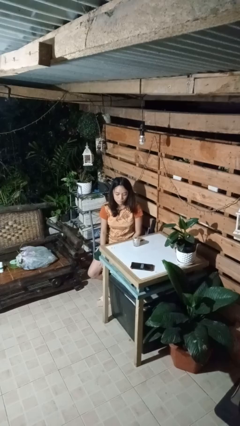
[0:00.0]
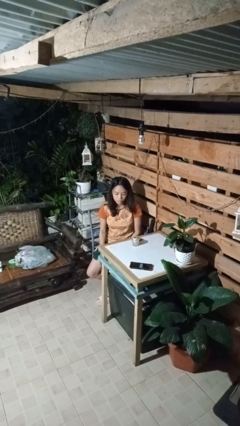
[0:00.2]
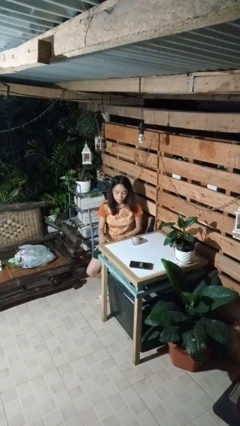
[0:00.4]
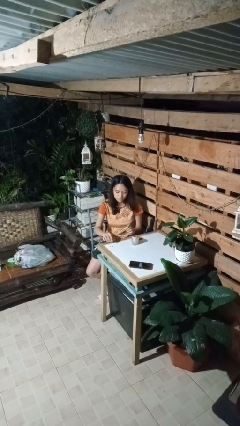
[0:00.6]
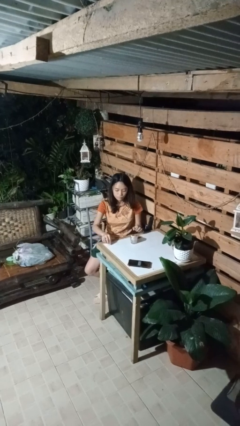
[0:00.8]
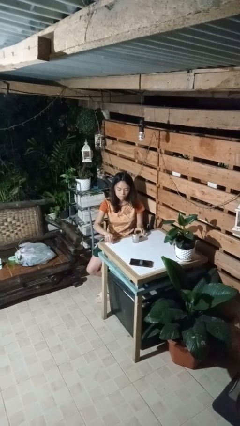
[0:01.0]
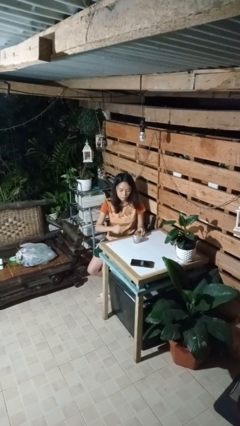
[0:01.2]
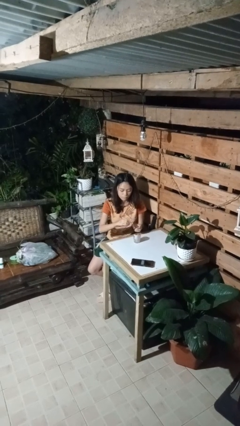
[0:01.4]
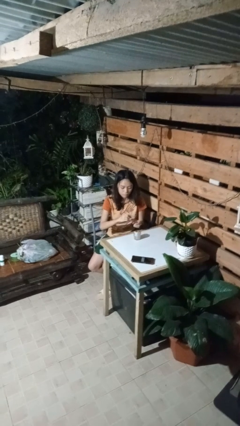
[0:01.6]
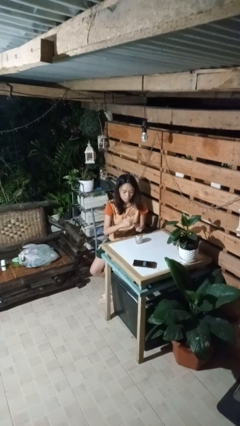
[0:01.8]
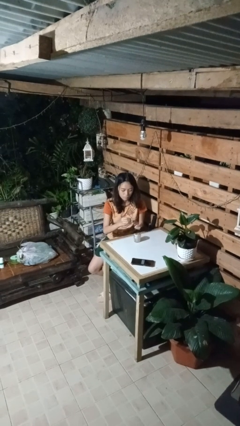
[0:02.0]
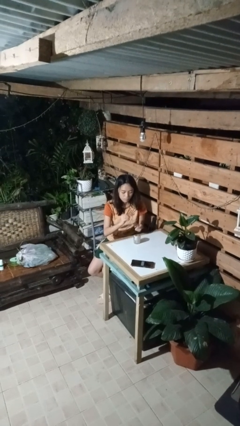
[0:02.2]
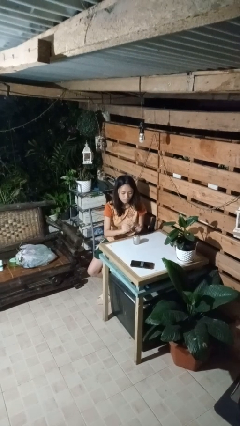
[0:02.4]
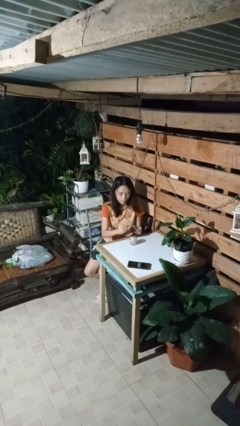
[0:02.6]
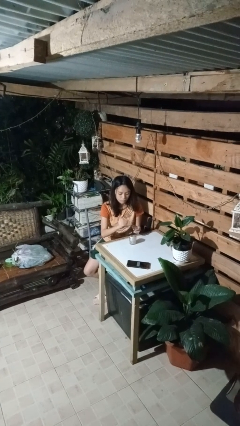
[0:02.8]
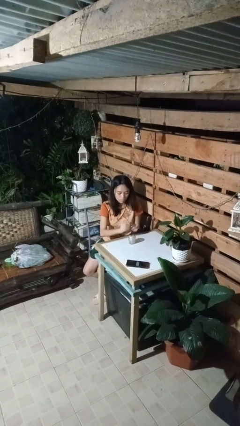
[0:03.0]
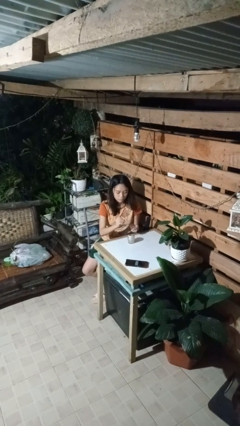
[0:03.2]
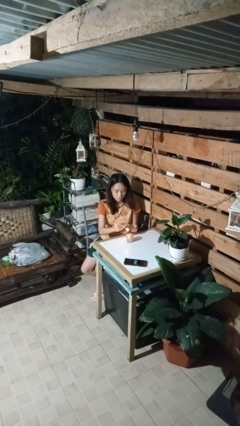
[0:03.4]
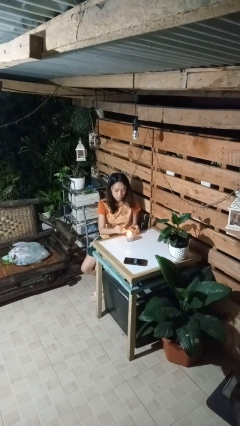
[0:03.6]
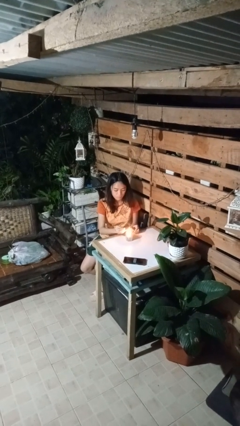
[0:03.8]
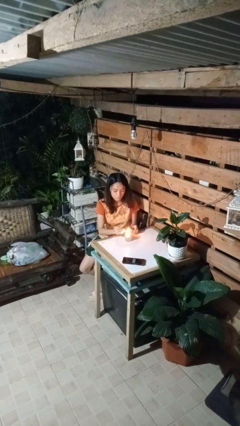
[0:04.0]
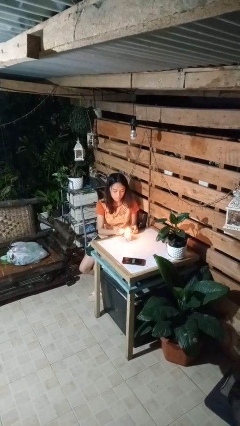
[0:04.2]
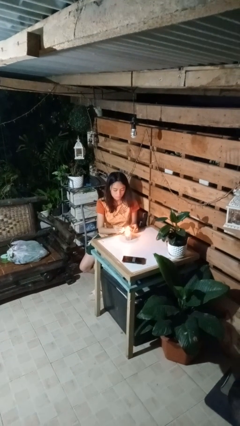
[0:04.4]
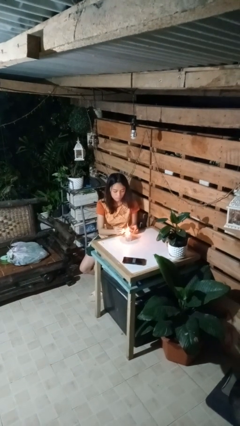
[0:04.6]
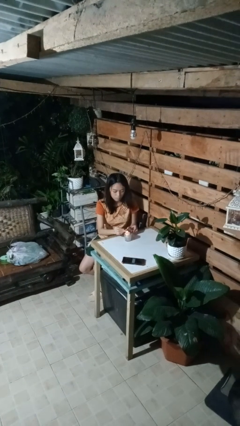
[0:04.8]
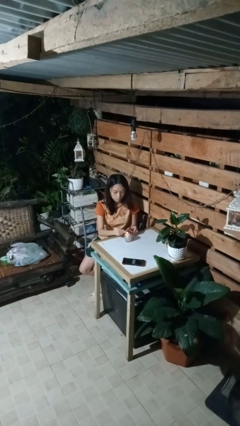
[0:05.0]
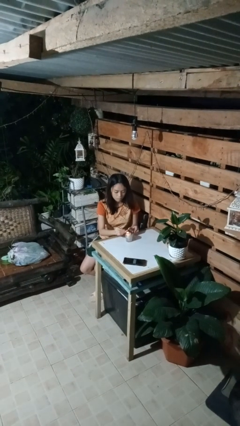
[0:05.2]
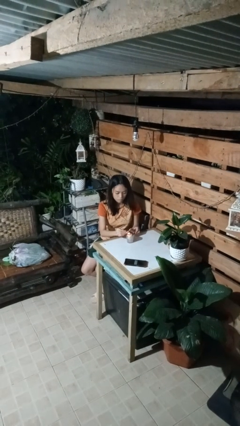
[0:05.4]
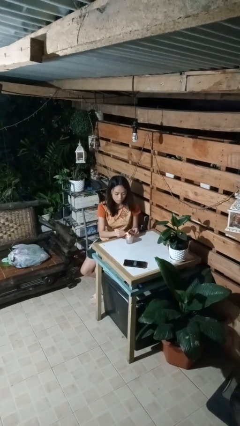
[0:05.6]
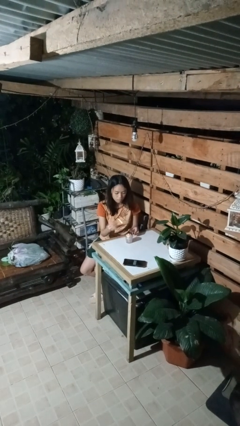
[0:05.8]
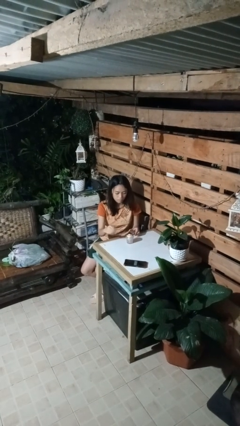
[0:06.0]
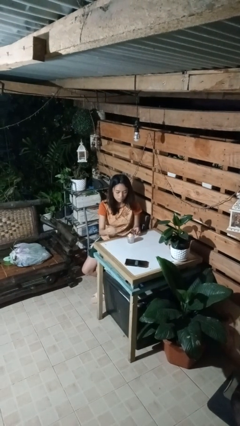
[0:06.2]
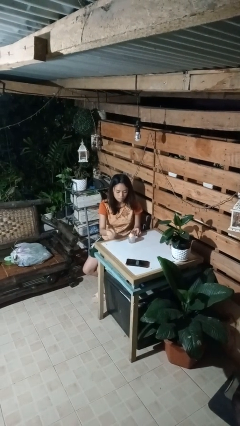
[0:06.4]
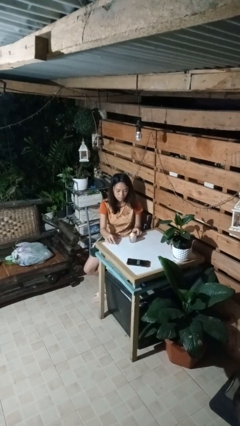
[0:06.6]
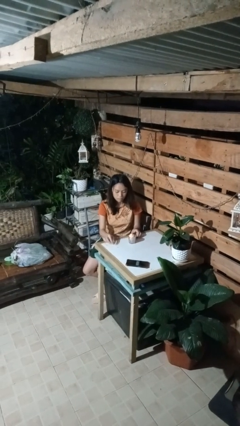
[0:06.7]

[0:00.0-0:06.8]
person lights candle

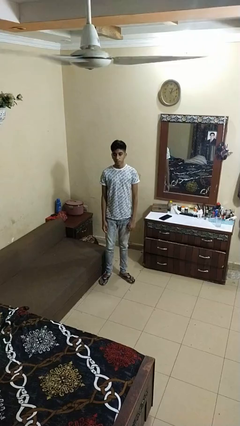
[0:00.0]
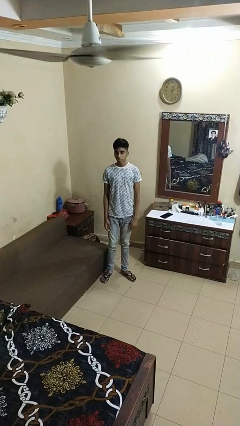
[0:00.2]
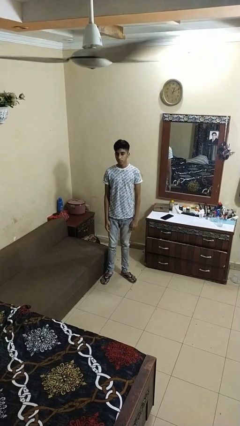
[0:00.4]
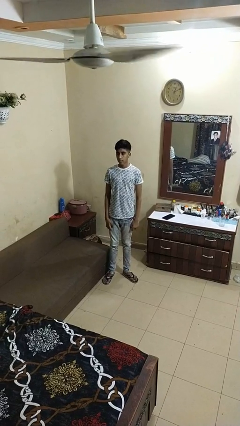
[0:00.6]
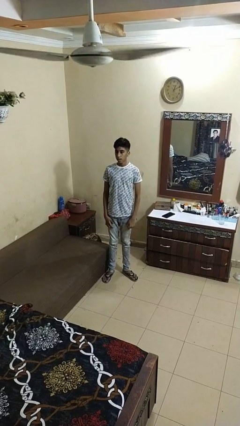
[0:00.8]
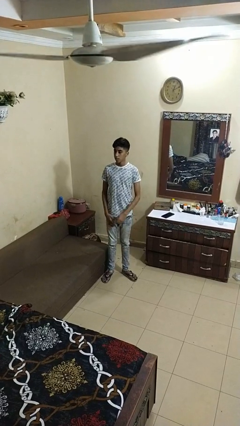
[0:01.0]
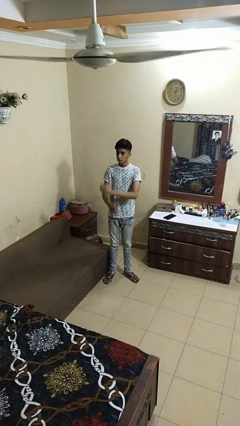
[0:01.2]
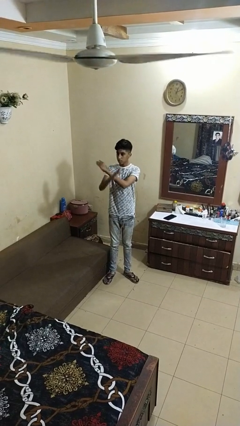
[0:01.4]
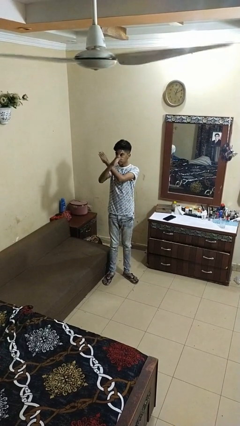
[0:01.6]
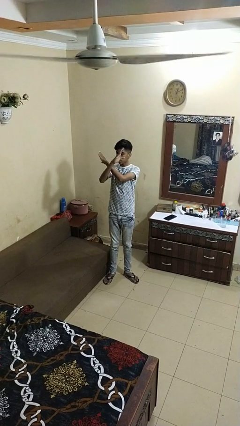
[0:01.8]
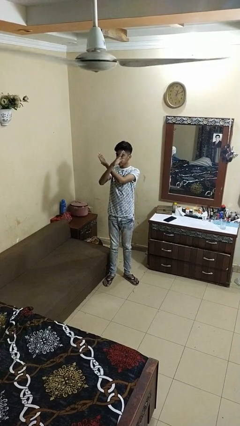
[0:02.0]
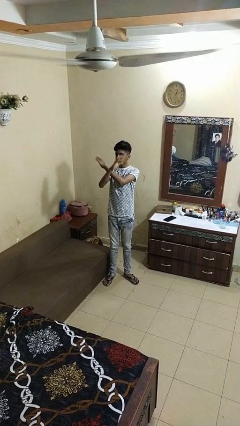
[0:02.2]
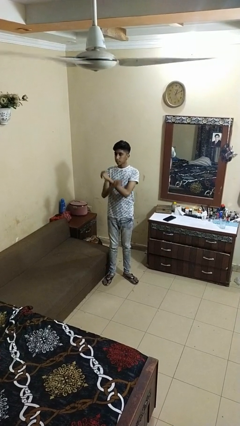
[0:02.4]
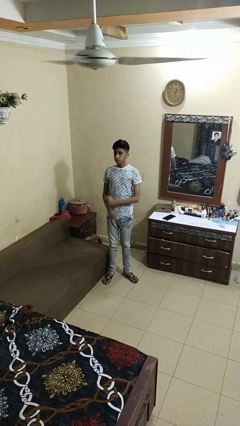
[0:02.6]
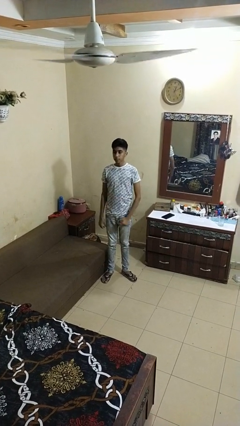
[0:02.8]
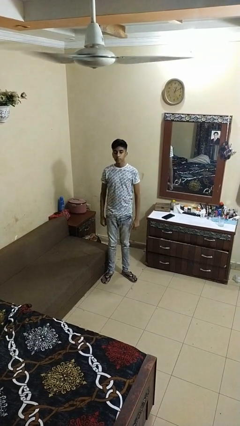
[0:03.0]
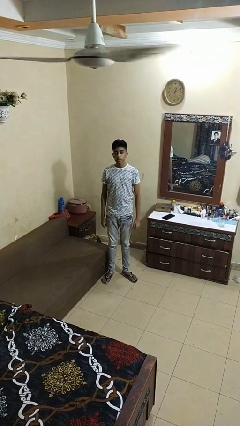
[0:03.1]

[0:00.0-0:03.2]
person gestures arms x

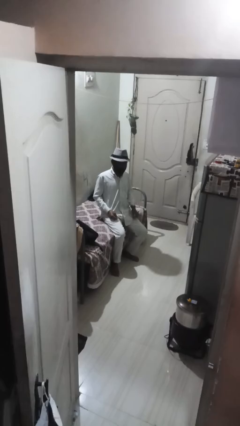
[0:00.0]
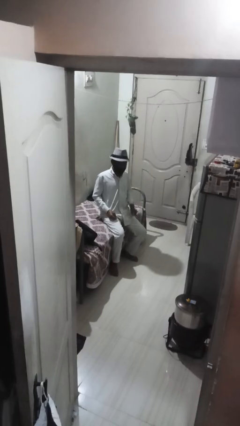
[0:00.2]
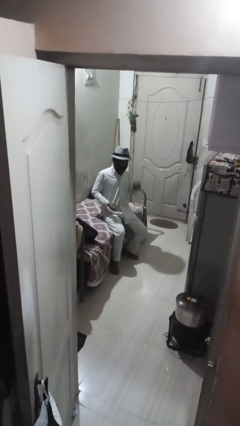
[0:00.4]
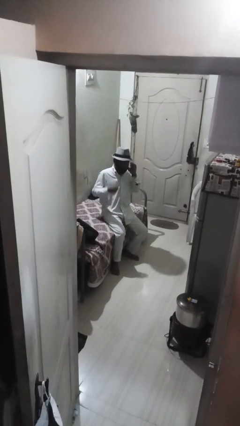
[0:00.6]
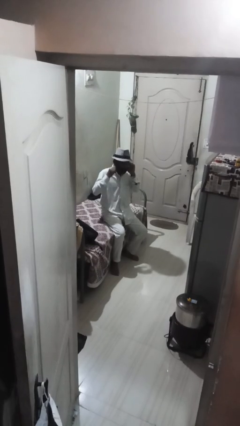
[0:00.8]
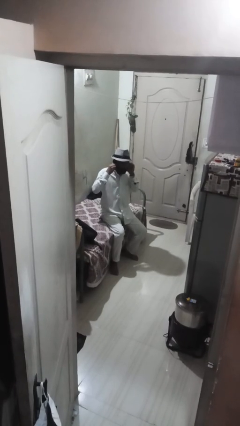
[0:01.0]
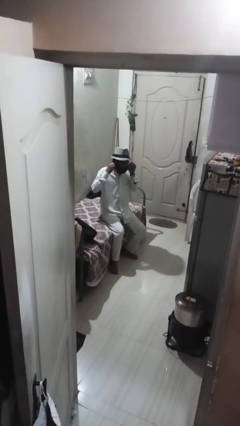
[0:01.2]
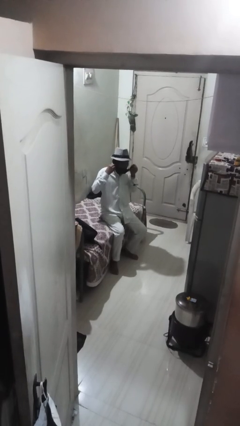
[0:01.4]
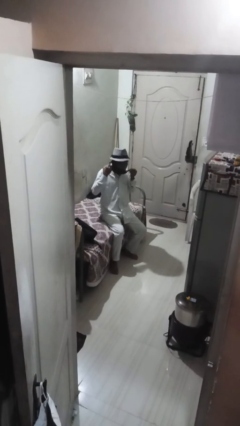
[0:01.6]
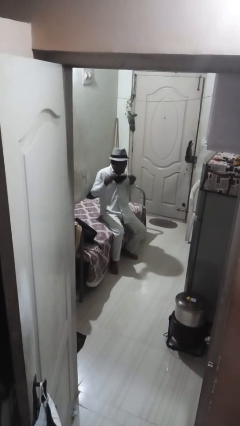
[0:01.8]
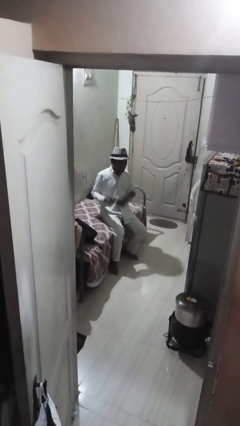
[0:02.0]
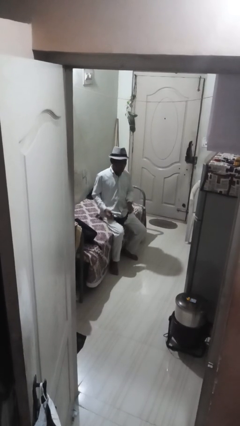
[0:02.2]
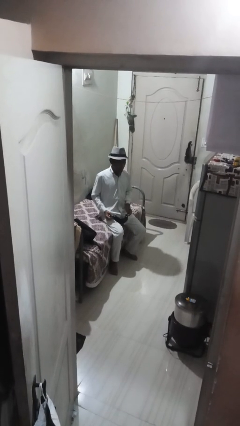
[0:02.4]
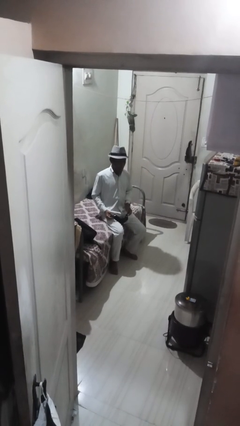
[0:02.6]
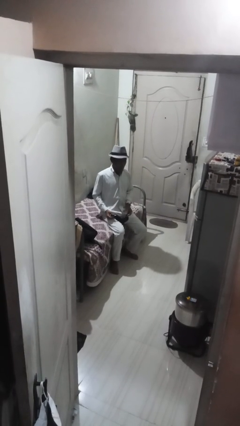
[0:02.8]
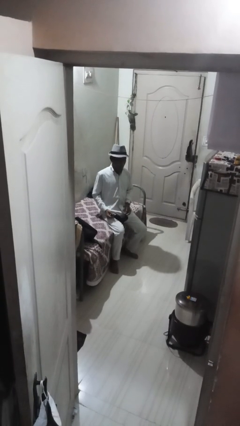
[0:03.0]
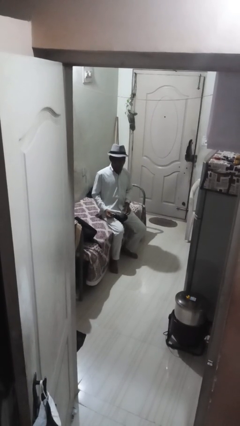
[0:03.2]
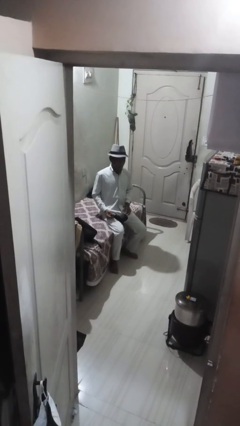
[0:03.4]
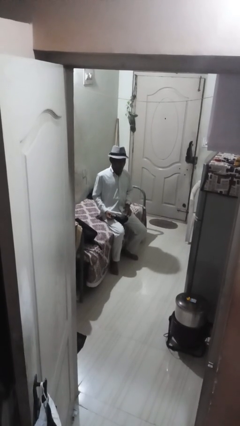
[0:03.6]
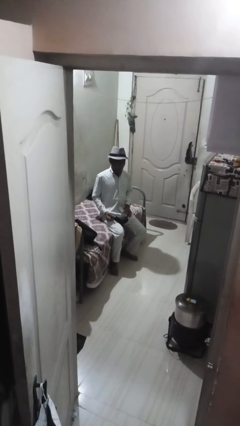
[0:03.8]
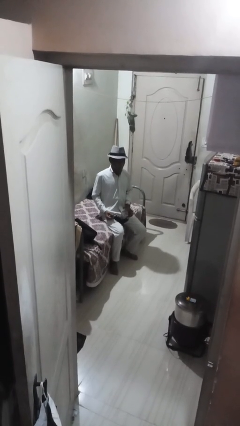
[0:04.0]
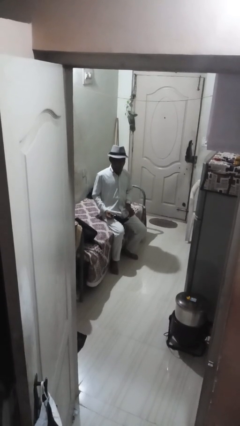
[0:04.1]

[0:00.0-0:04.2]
person takes off facemask

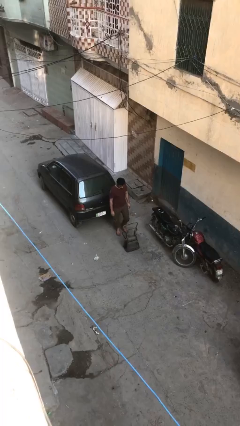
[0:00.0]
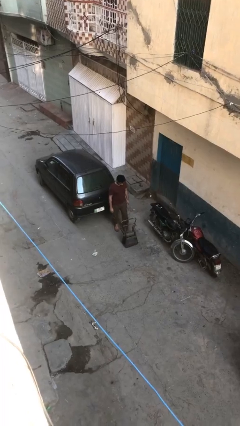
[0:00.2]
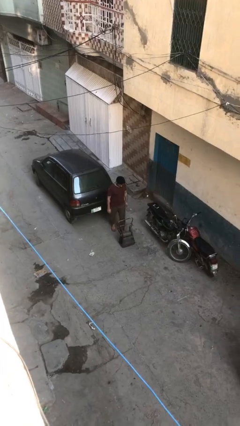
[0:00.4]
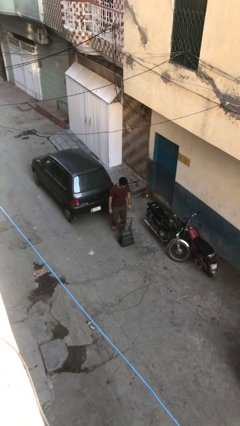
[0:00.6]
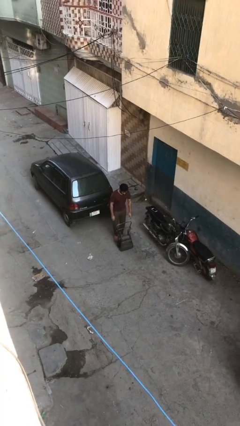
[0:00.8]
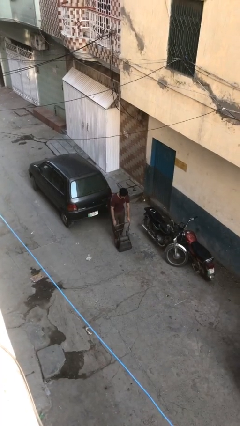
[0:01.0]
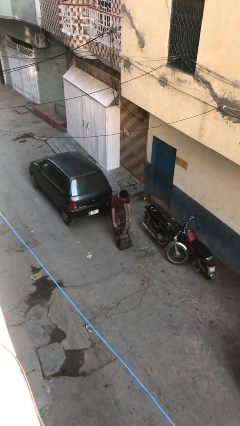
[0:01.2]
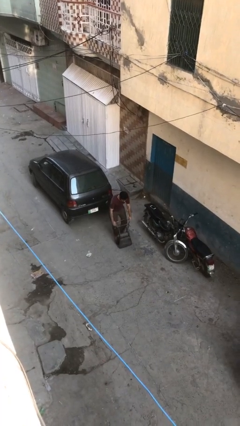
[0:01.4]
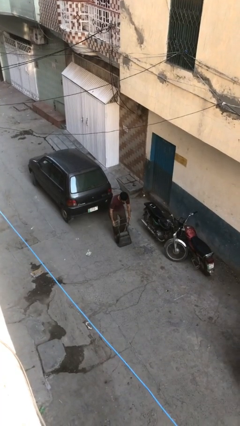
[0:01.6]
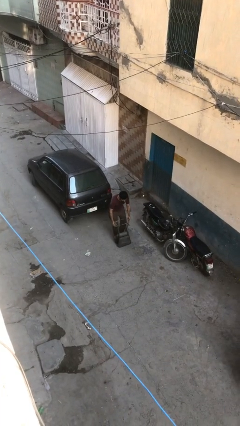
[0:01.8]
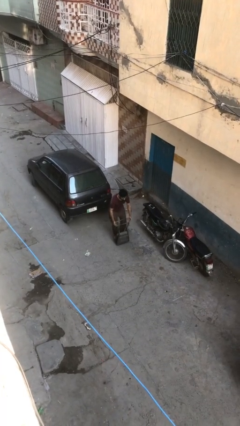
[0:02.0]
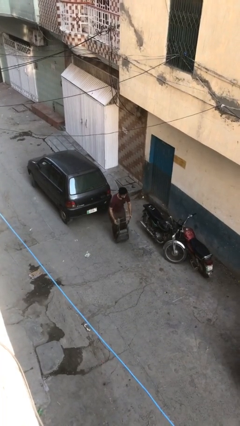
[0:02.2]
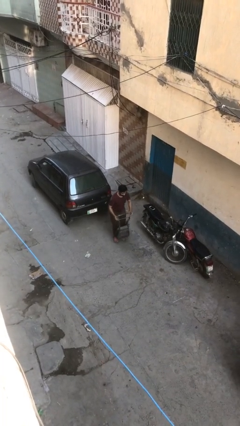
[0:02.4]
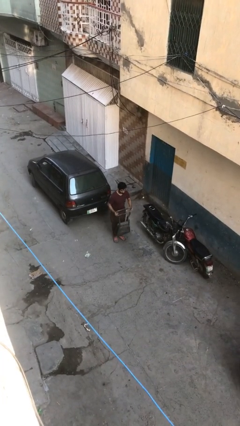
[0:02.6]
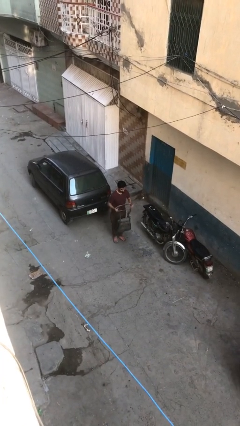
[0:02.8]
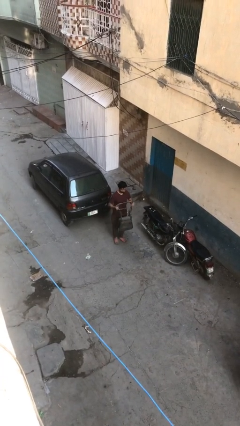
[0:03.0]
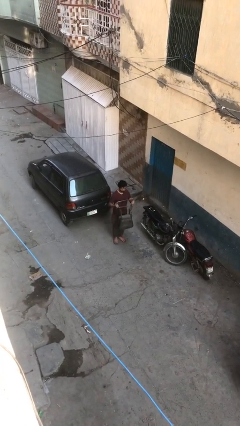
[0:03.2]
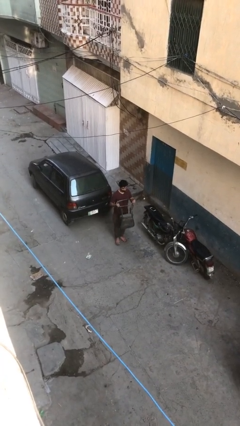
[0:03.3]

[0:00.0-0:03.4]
person picks up object from floor

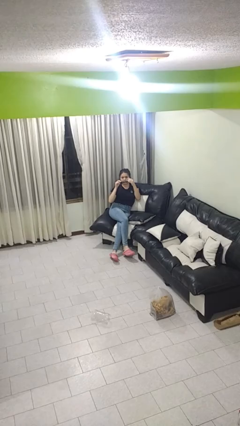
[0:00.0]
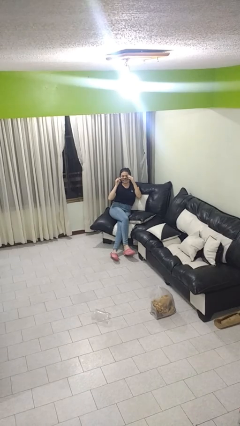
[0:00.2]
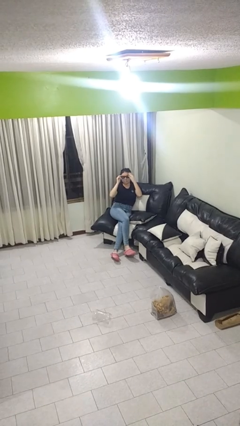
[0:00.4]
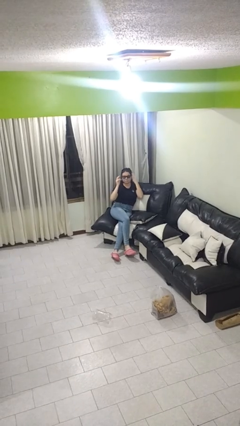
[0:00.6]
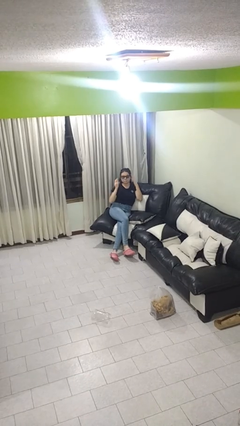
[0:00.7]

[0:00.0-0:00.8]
person puts on sunglasses
